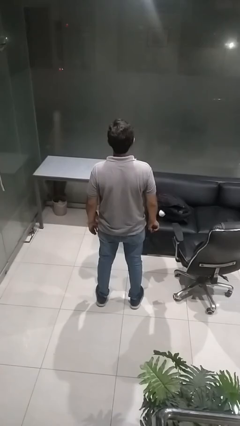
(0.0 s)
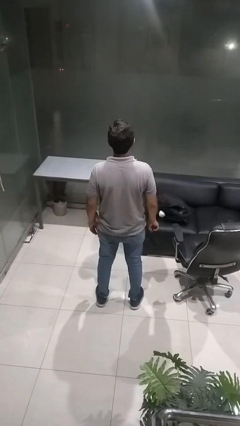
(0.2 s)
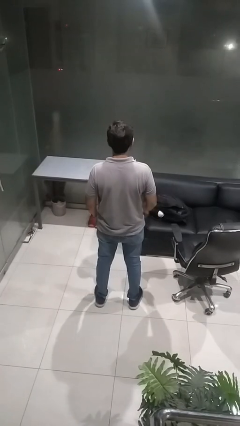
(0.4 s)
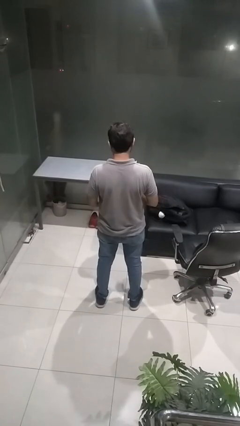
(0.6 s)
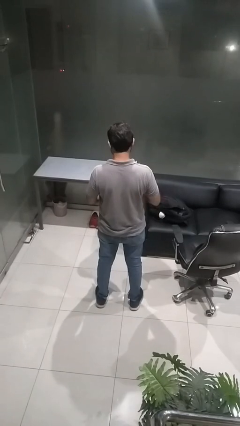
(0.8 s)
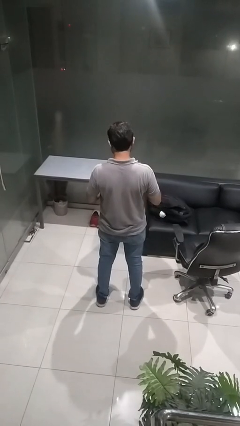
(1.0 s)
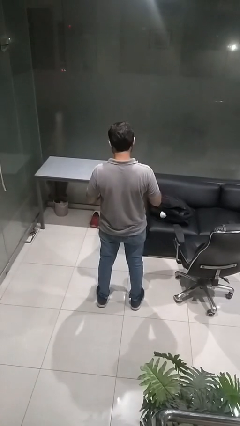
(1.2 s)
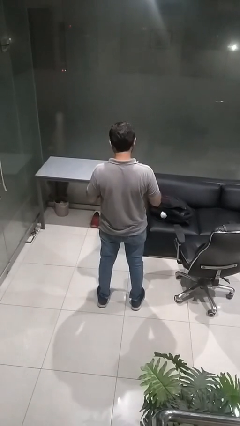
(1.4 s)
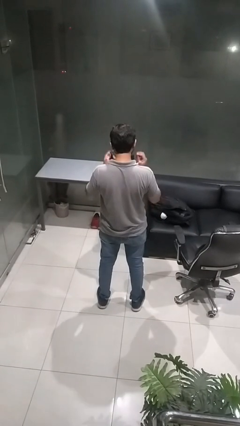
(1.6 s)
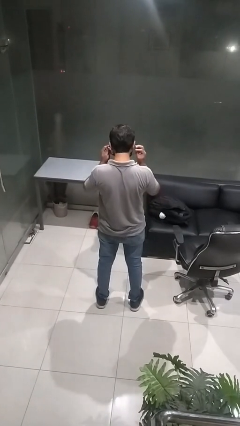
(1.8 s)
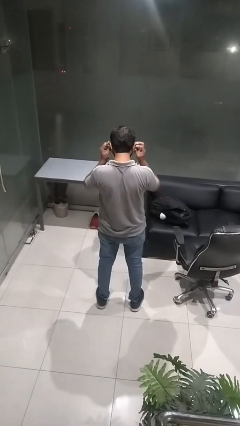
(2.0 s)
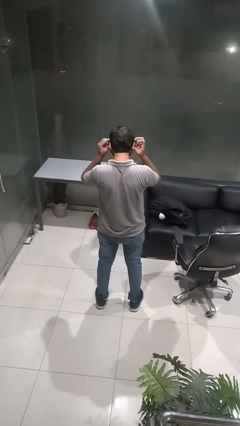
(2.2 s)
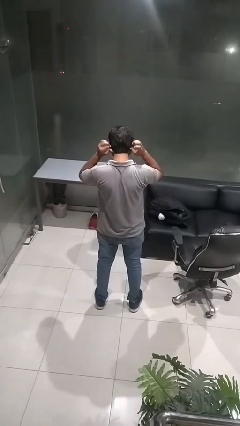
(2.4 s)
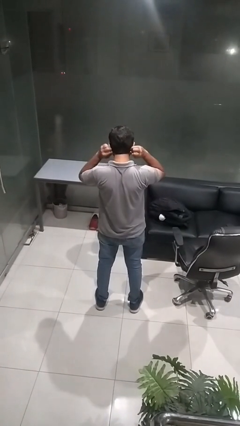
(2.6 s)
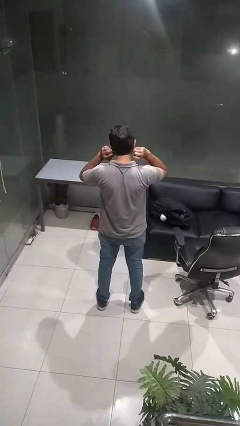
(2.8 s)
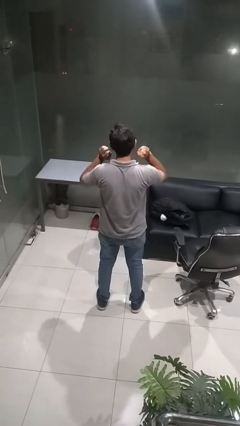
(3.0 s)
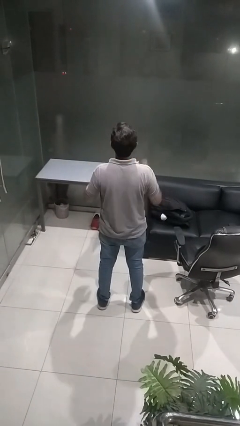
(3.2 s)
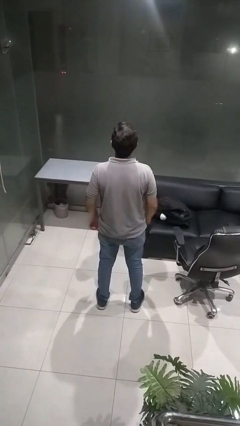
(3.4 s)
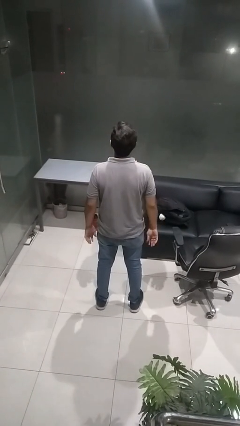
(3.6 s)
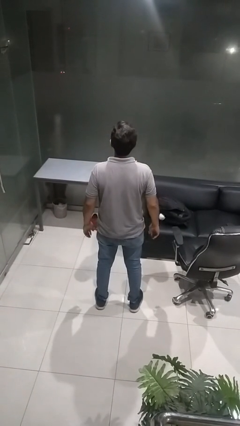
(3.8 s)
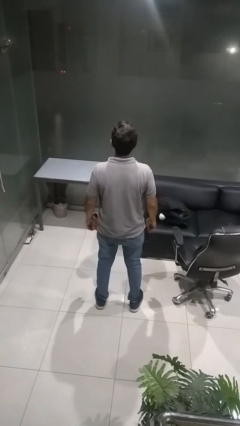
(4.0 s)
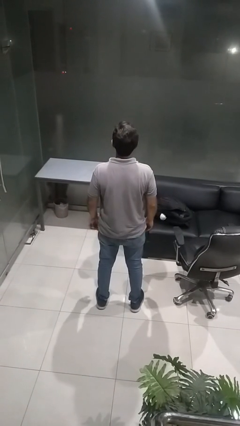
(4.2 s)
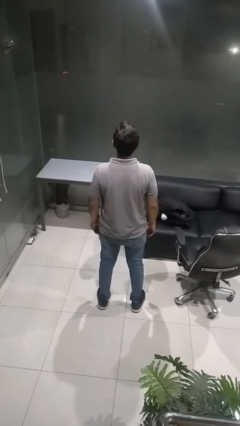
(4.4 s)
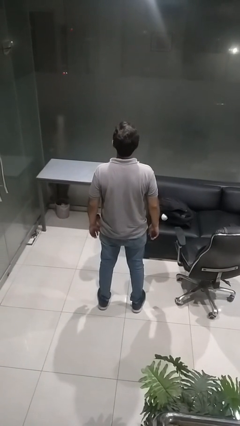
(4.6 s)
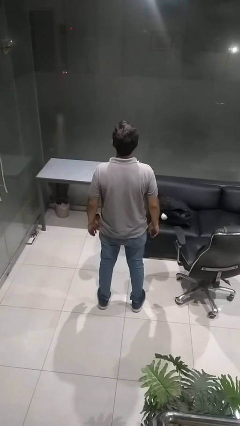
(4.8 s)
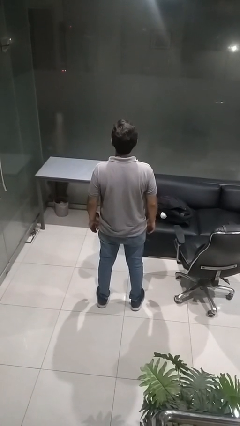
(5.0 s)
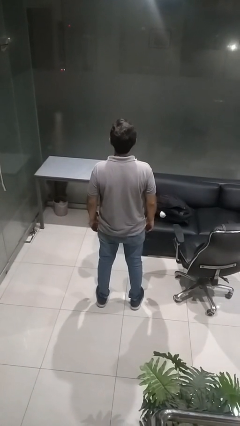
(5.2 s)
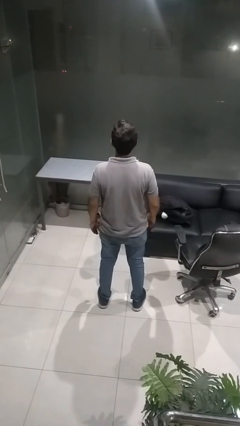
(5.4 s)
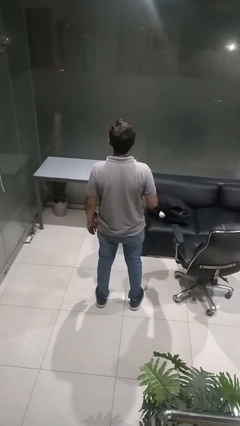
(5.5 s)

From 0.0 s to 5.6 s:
person puts on facemask

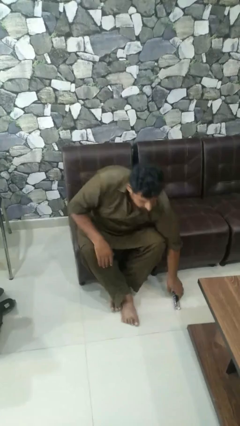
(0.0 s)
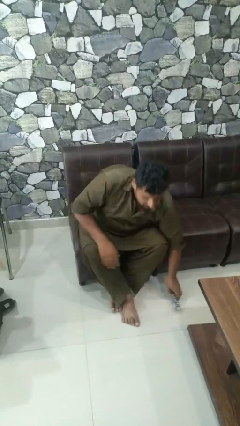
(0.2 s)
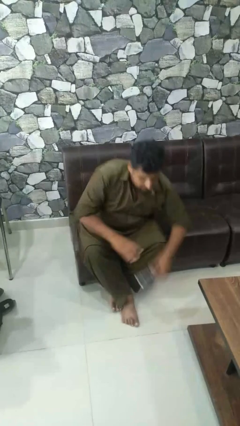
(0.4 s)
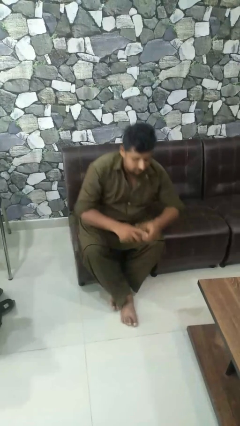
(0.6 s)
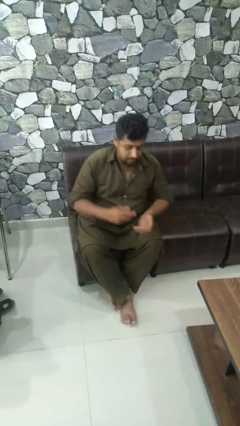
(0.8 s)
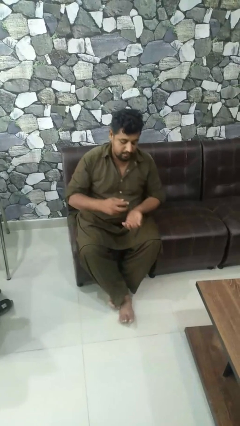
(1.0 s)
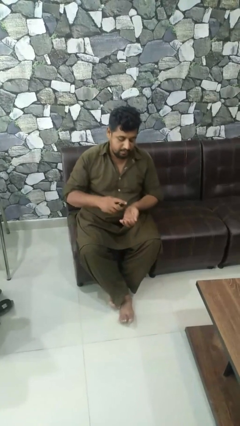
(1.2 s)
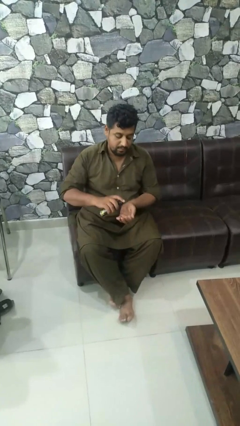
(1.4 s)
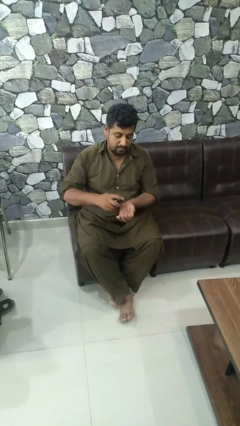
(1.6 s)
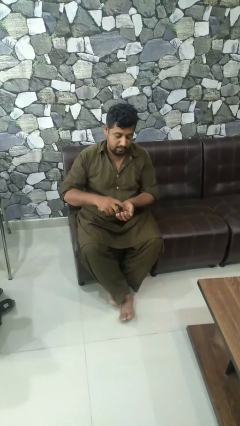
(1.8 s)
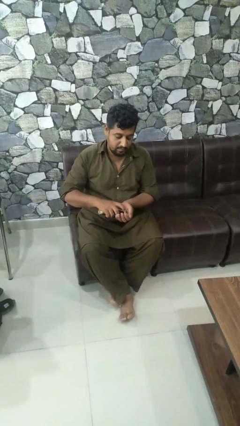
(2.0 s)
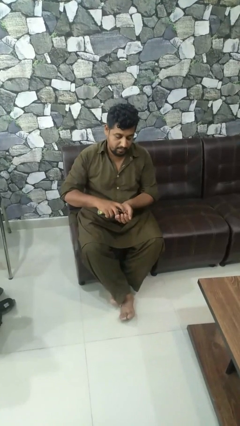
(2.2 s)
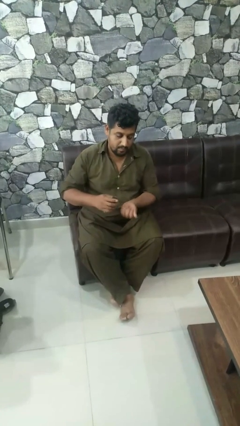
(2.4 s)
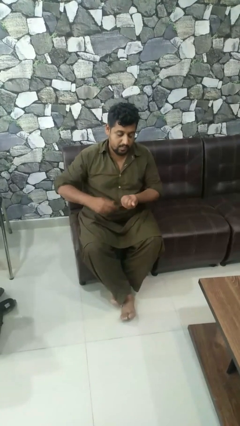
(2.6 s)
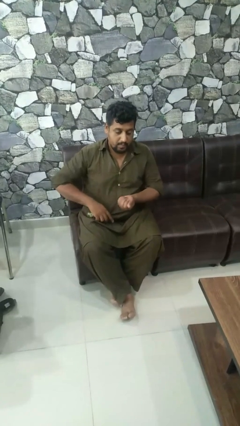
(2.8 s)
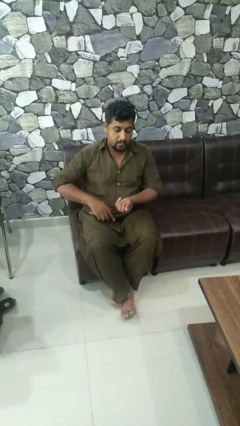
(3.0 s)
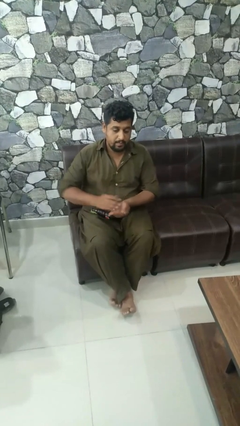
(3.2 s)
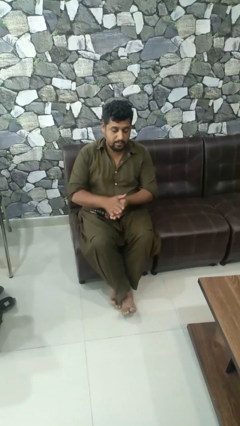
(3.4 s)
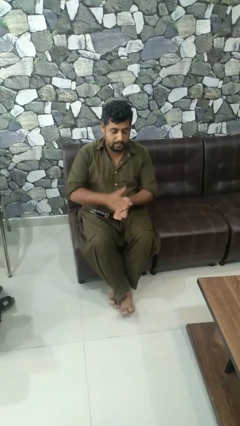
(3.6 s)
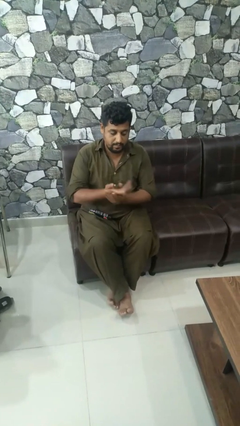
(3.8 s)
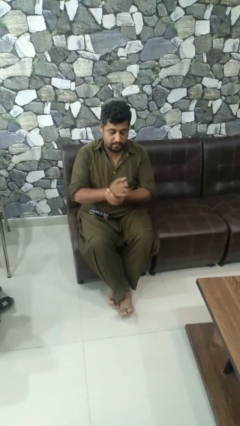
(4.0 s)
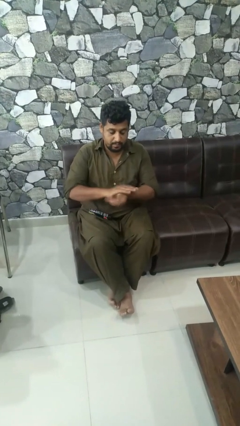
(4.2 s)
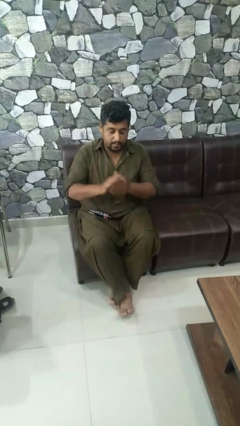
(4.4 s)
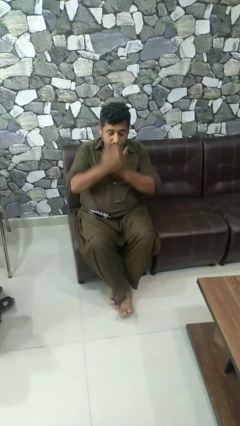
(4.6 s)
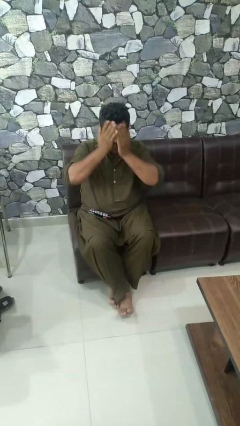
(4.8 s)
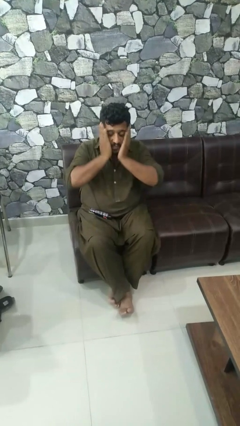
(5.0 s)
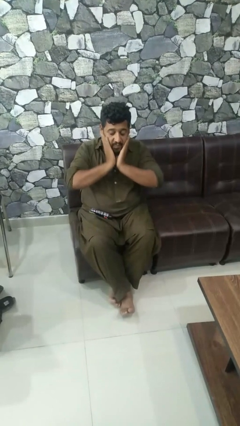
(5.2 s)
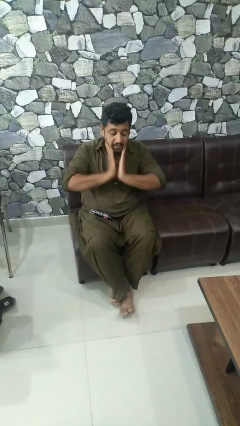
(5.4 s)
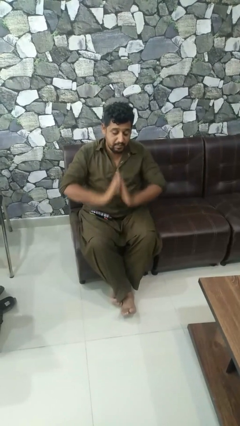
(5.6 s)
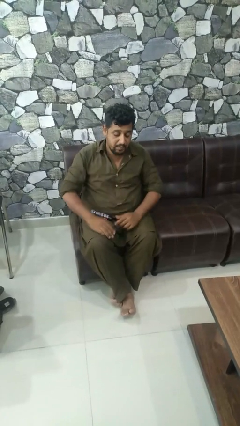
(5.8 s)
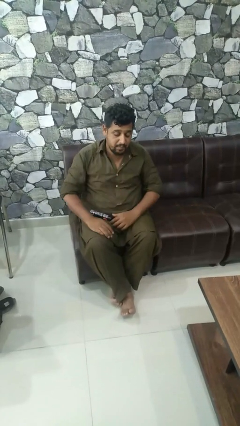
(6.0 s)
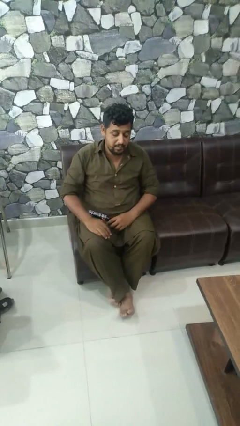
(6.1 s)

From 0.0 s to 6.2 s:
person applies sunscreen

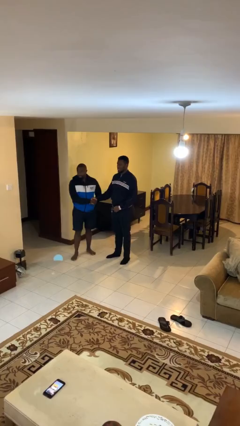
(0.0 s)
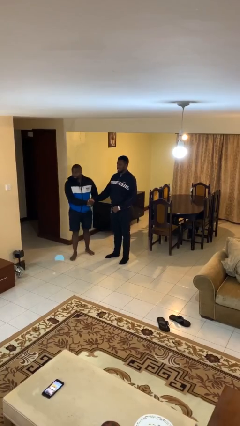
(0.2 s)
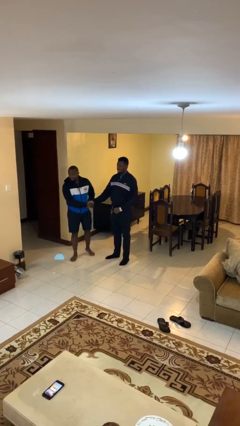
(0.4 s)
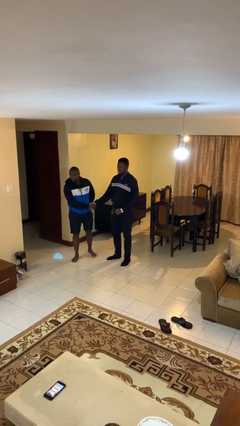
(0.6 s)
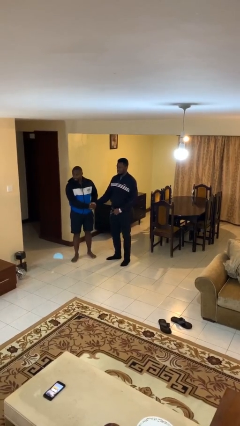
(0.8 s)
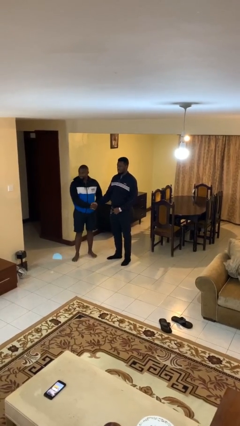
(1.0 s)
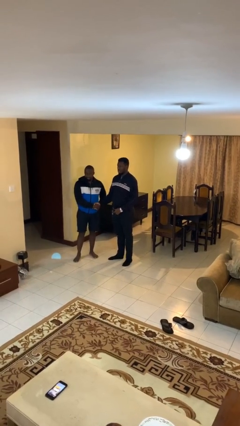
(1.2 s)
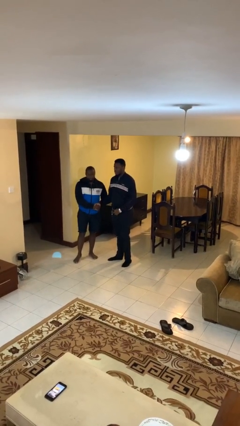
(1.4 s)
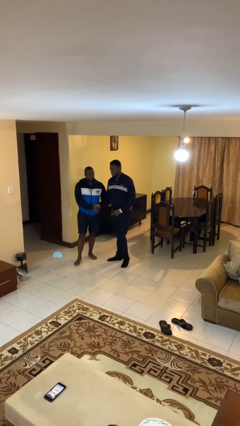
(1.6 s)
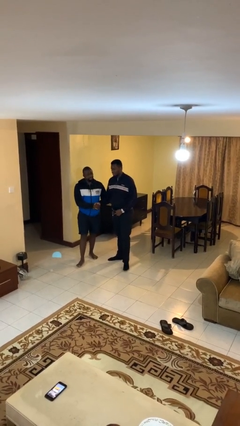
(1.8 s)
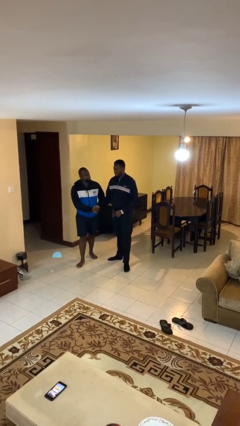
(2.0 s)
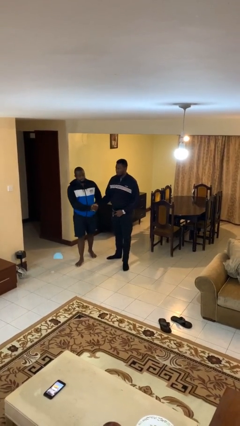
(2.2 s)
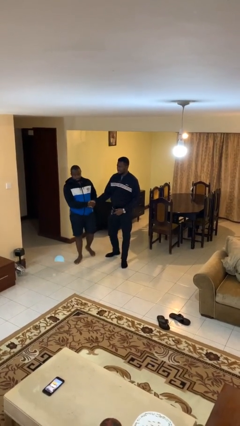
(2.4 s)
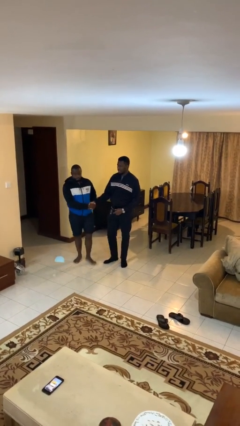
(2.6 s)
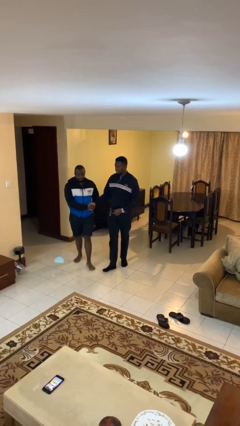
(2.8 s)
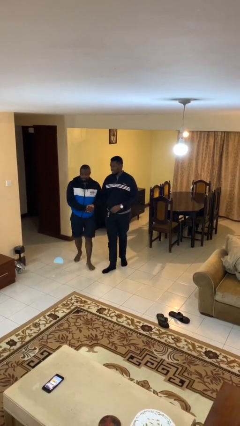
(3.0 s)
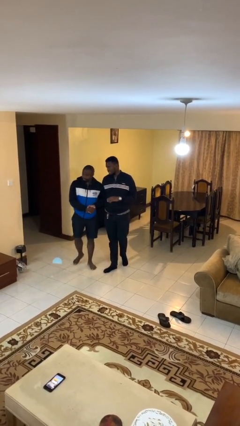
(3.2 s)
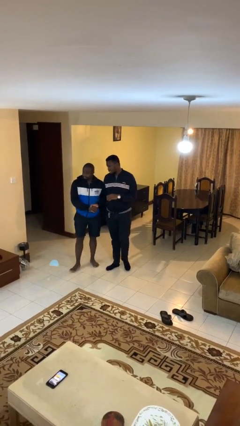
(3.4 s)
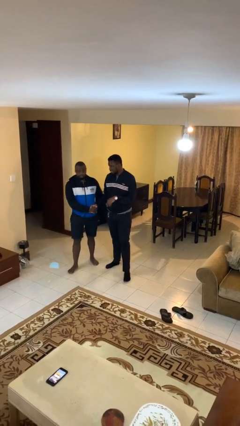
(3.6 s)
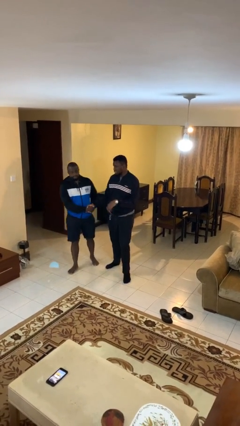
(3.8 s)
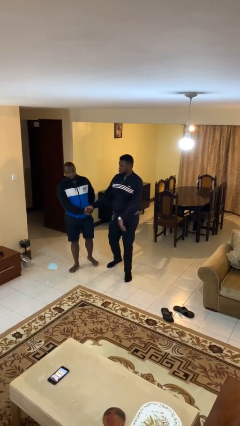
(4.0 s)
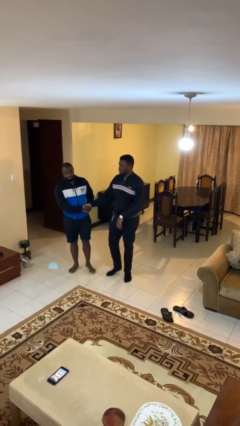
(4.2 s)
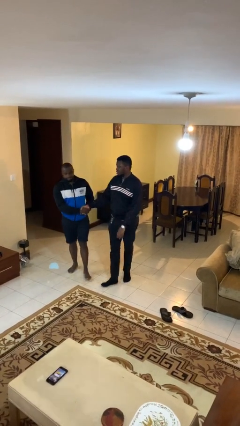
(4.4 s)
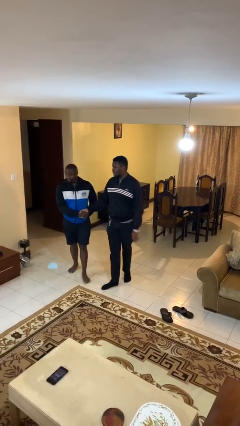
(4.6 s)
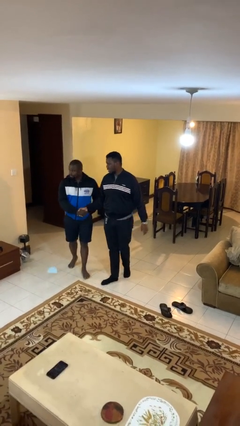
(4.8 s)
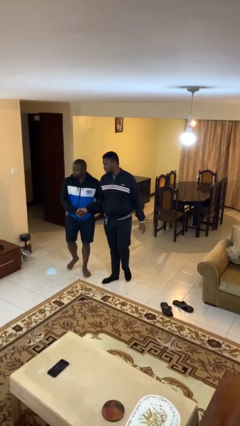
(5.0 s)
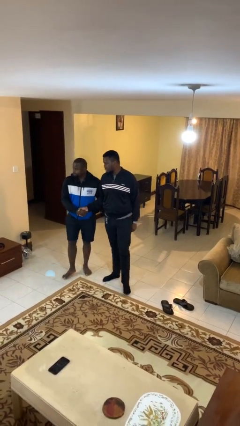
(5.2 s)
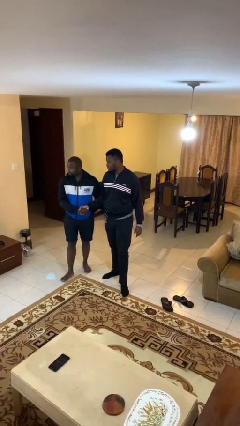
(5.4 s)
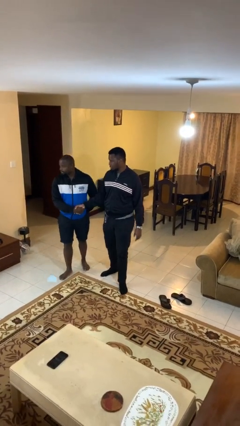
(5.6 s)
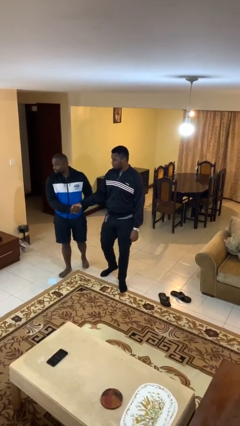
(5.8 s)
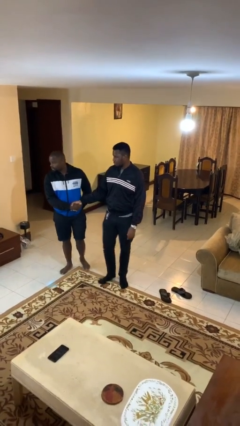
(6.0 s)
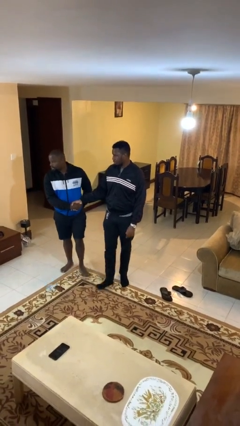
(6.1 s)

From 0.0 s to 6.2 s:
person holds hand
